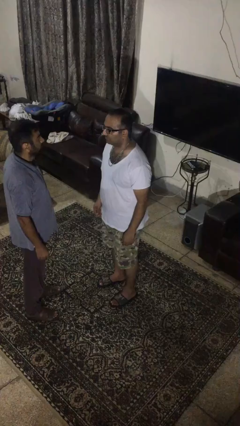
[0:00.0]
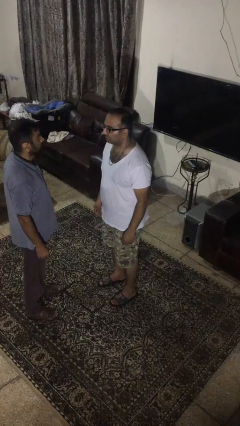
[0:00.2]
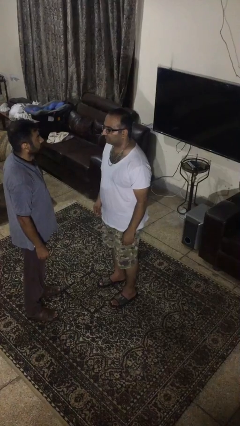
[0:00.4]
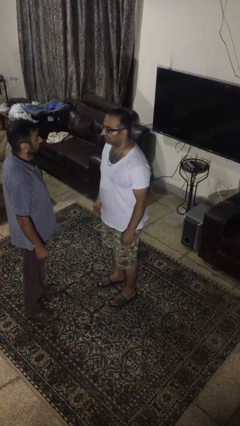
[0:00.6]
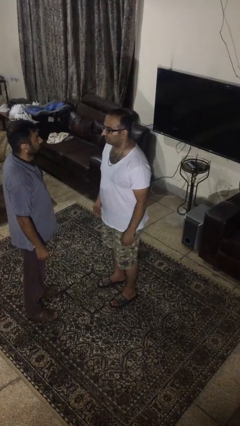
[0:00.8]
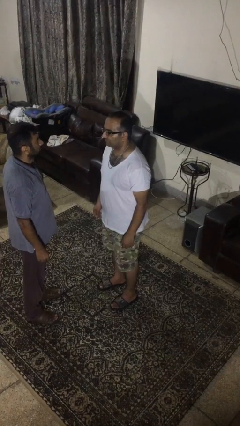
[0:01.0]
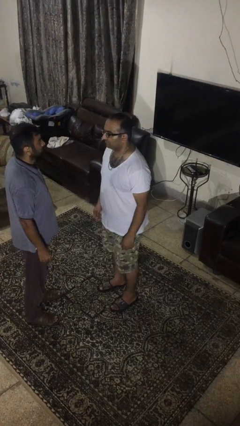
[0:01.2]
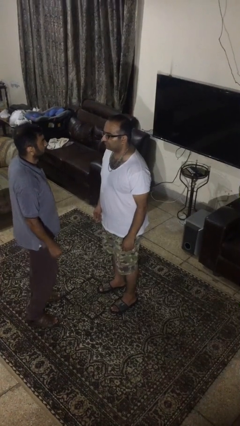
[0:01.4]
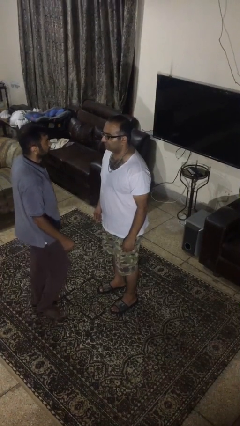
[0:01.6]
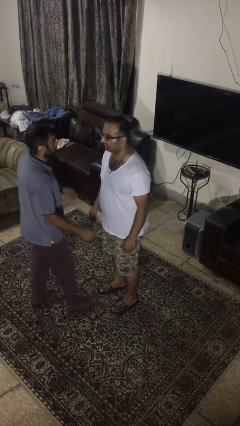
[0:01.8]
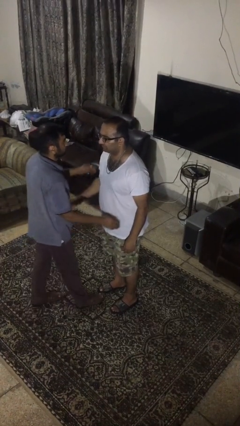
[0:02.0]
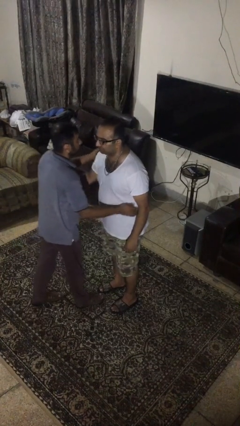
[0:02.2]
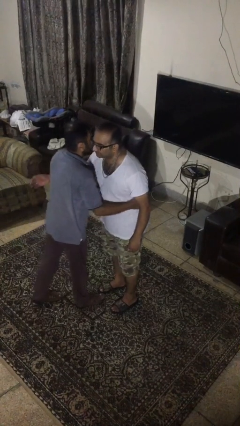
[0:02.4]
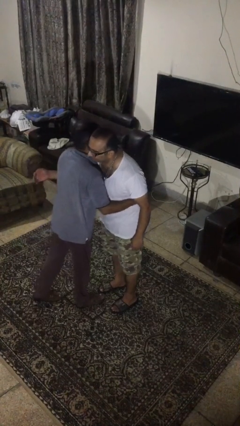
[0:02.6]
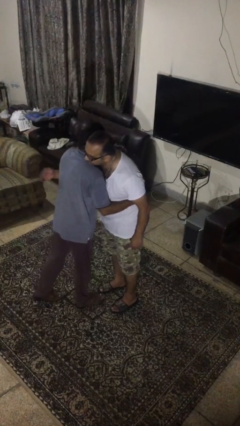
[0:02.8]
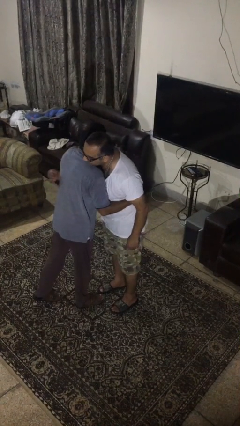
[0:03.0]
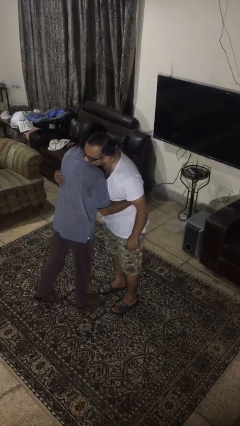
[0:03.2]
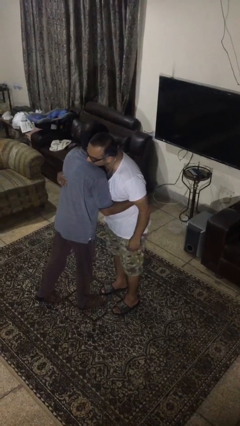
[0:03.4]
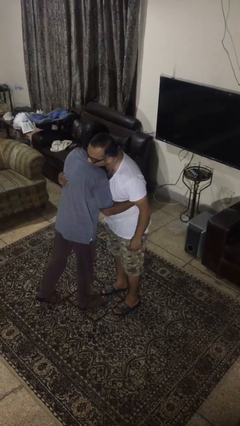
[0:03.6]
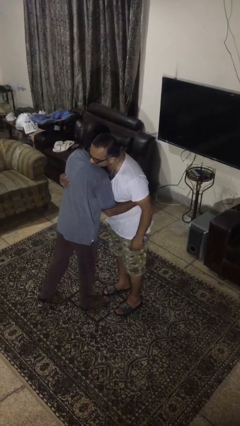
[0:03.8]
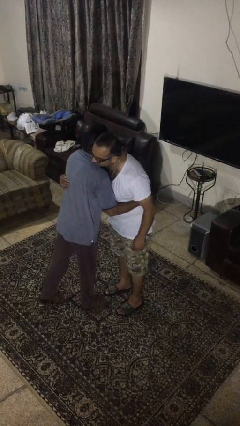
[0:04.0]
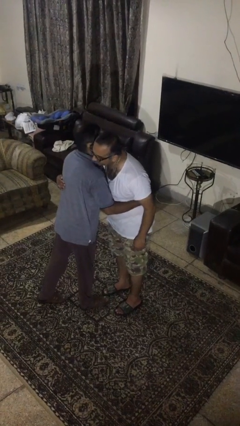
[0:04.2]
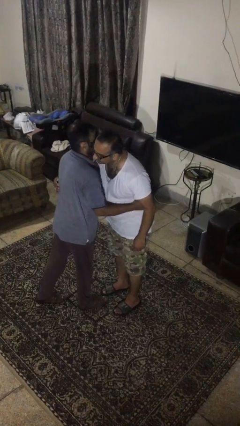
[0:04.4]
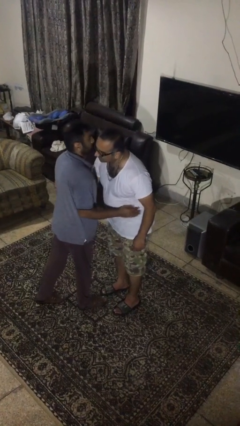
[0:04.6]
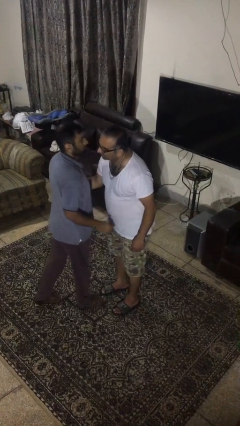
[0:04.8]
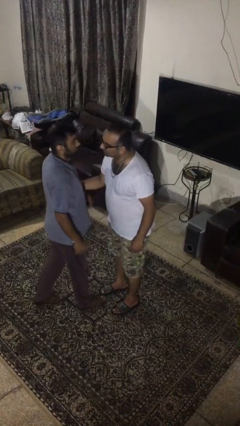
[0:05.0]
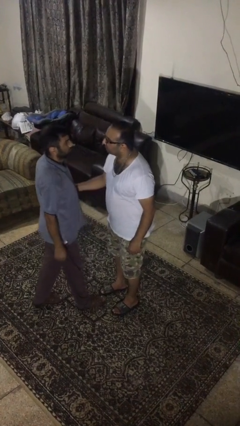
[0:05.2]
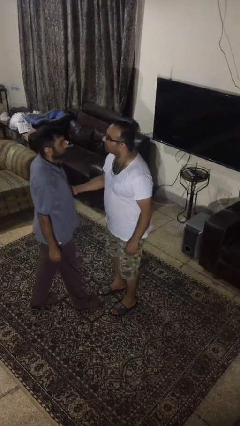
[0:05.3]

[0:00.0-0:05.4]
person embraces person

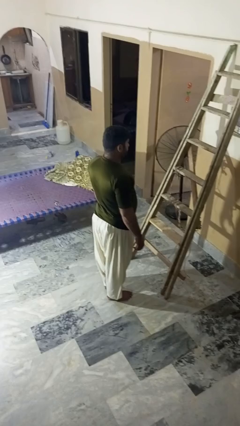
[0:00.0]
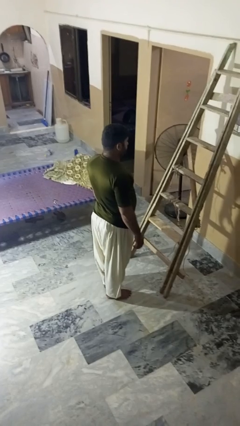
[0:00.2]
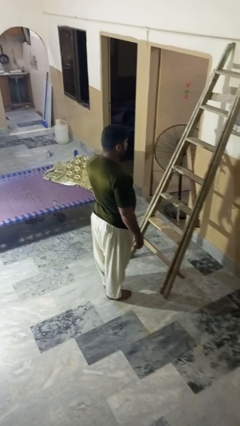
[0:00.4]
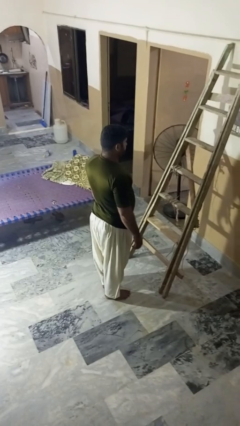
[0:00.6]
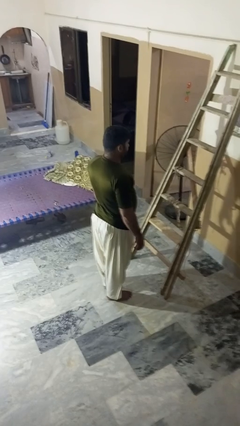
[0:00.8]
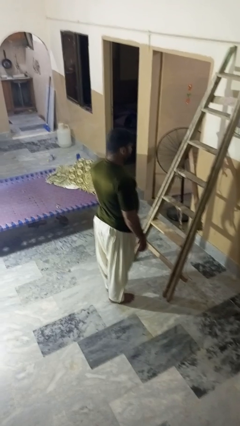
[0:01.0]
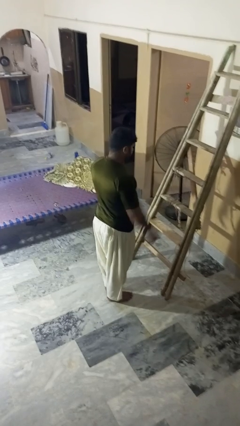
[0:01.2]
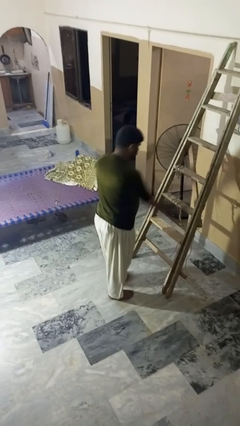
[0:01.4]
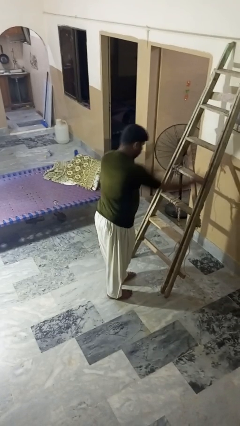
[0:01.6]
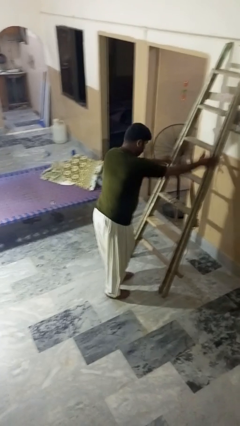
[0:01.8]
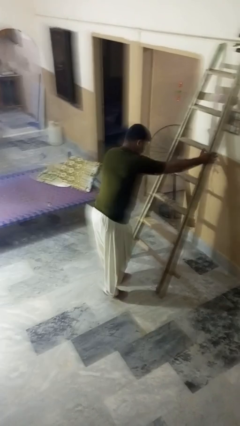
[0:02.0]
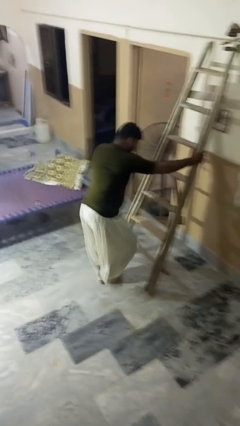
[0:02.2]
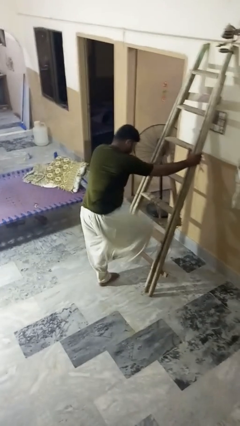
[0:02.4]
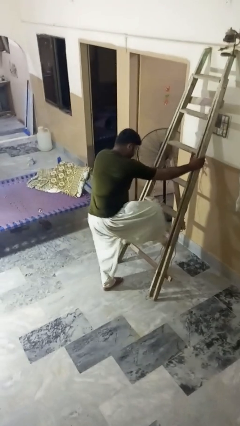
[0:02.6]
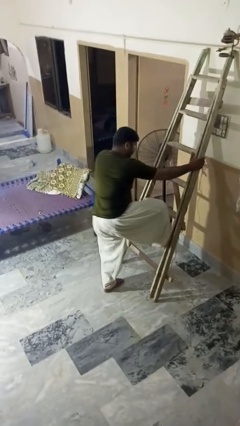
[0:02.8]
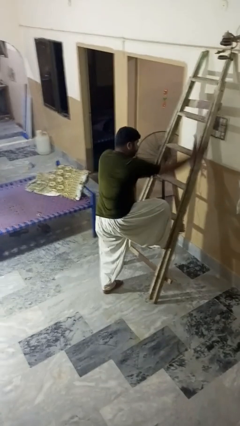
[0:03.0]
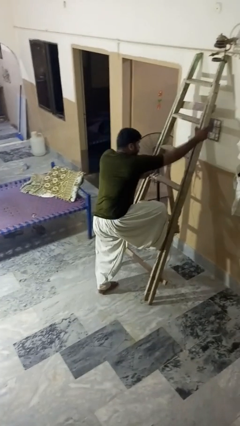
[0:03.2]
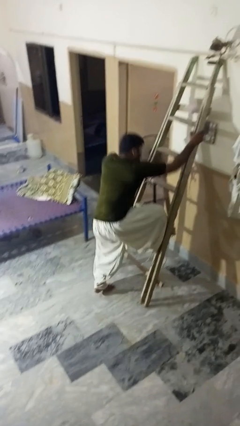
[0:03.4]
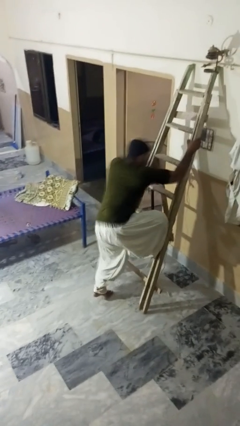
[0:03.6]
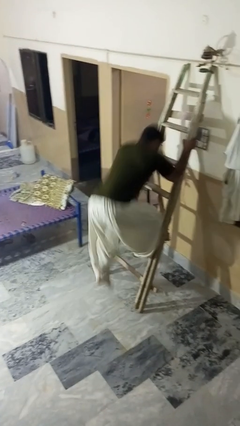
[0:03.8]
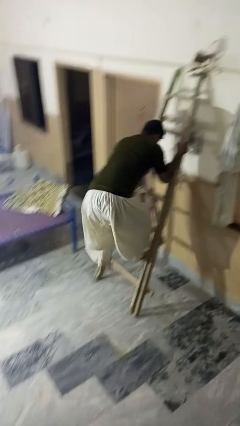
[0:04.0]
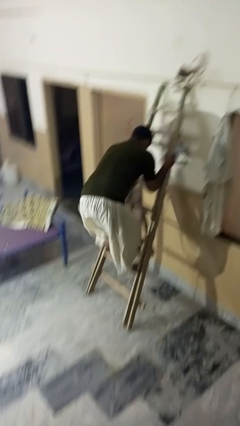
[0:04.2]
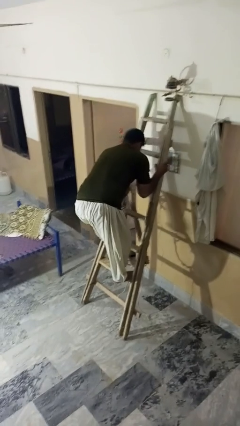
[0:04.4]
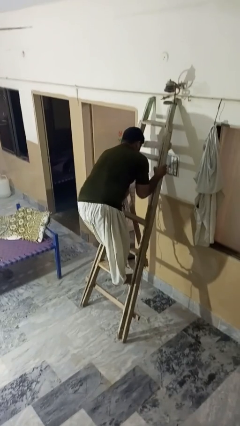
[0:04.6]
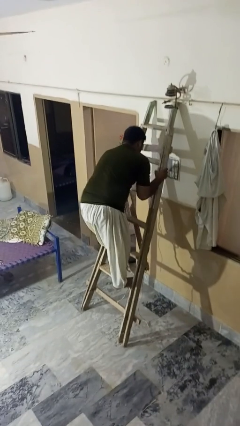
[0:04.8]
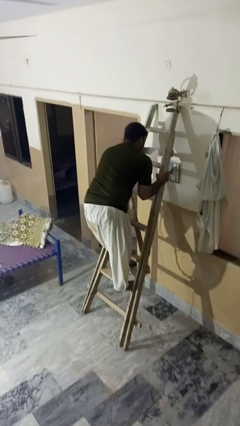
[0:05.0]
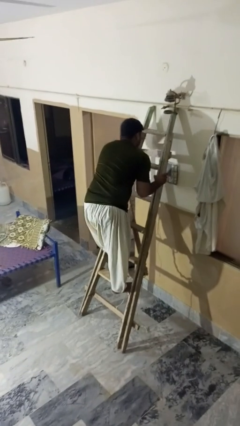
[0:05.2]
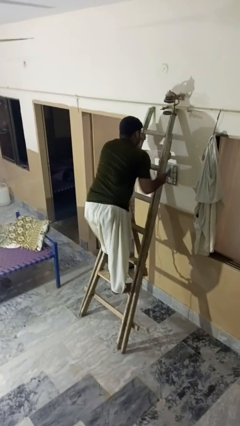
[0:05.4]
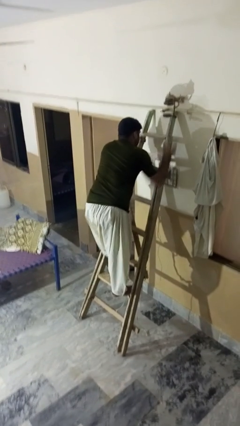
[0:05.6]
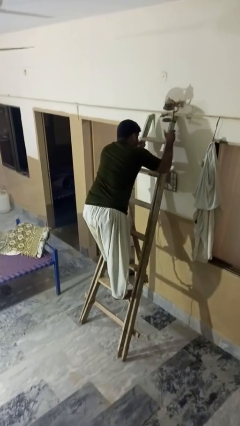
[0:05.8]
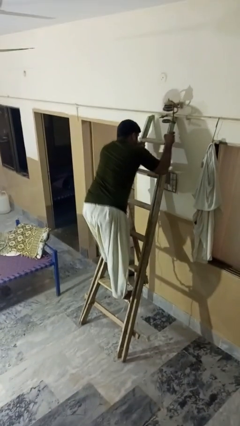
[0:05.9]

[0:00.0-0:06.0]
person climbs up ladder

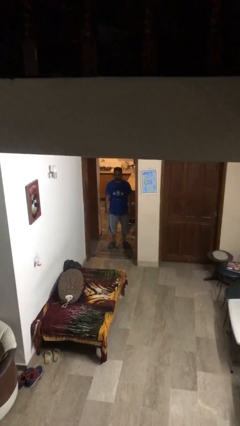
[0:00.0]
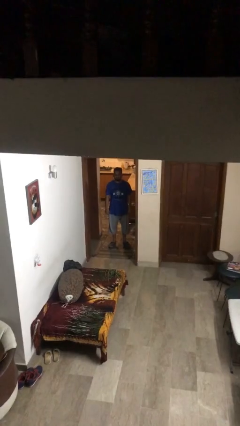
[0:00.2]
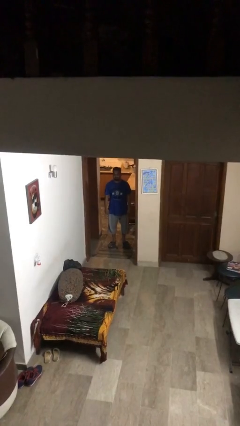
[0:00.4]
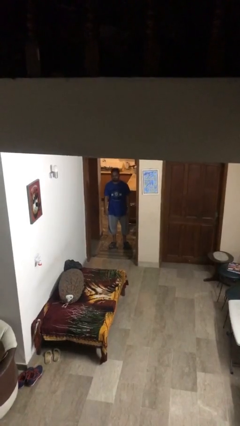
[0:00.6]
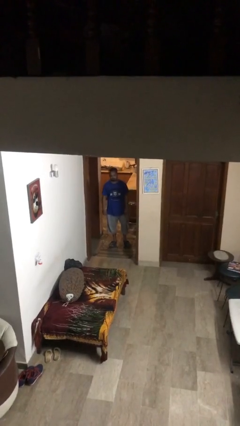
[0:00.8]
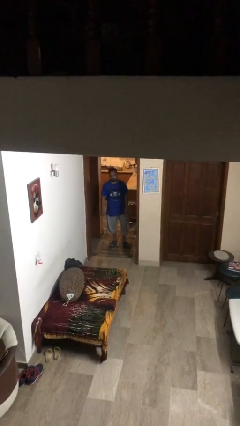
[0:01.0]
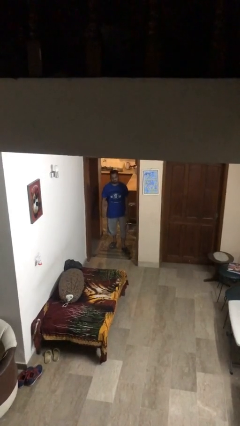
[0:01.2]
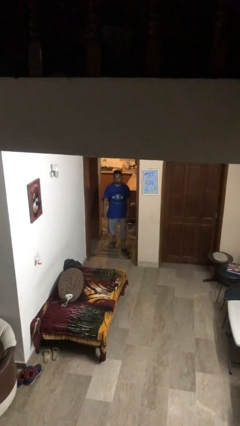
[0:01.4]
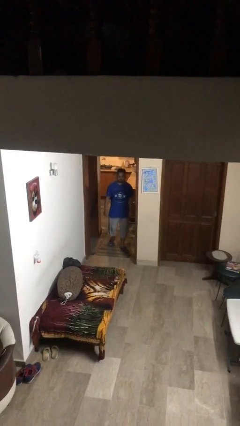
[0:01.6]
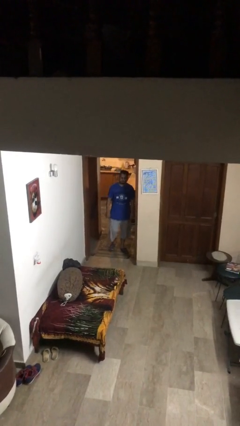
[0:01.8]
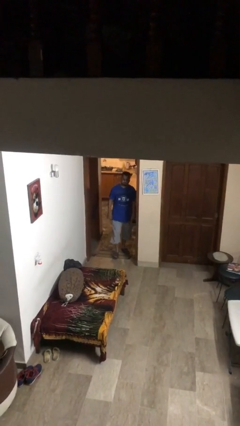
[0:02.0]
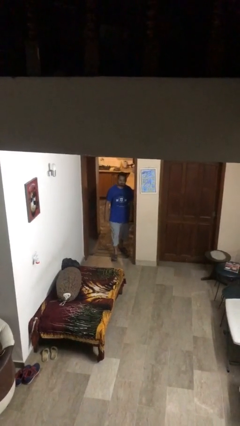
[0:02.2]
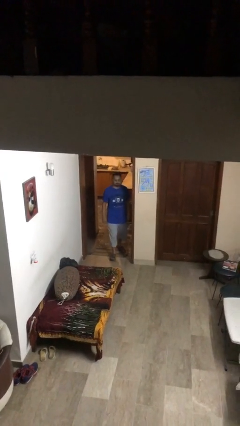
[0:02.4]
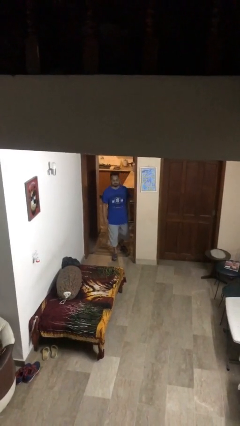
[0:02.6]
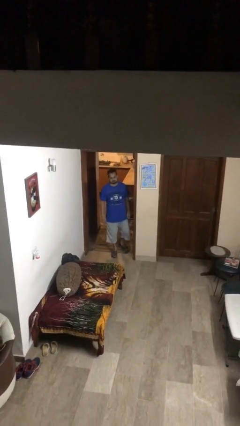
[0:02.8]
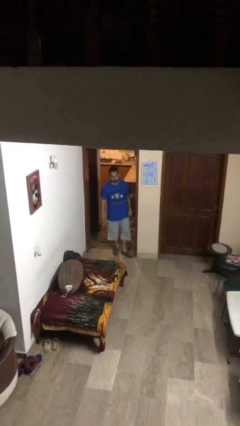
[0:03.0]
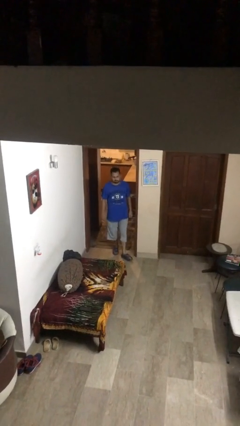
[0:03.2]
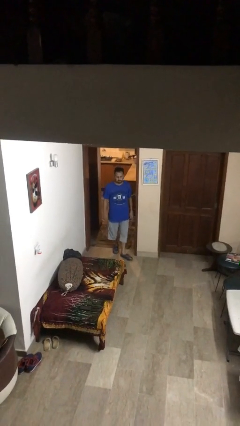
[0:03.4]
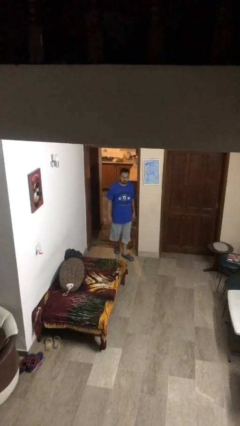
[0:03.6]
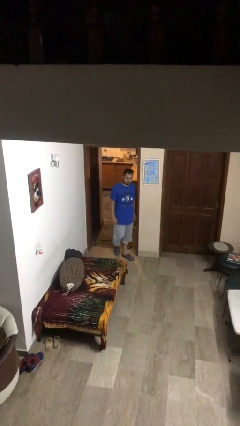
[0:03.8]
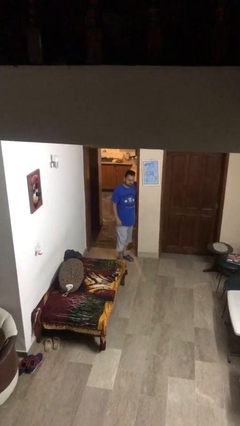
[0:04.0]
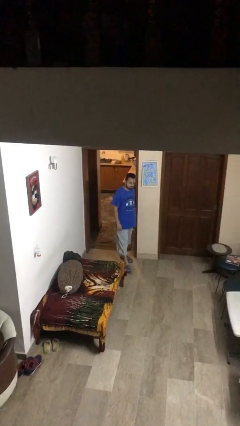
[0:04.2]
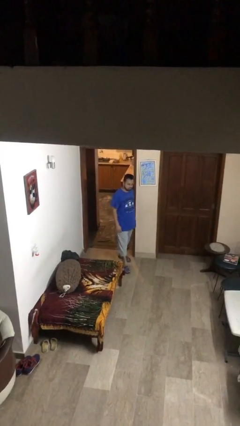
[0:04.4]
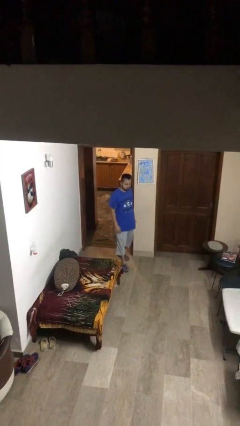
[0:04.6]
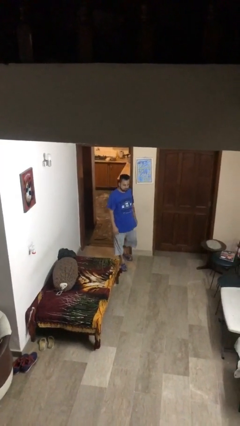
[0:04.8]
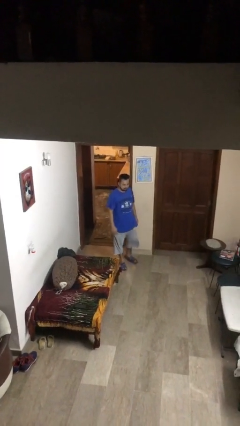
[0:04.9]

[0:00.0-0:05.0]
person enters scene through structure

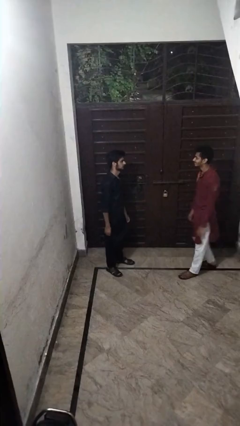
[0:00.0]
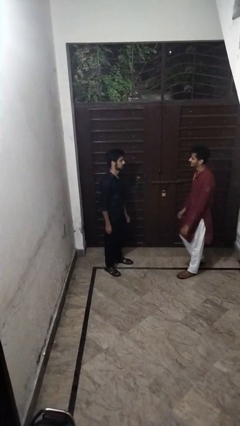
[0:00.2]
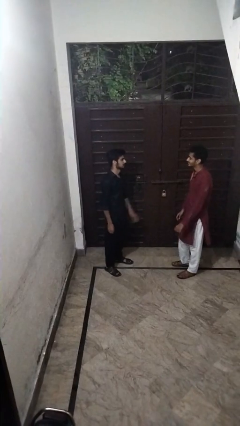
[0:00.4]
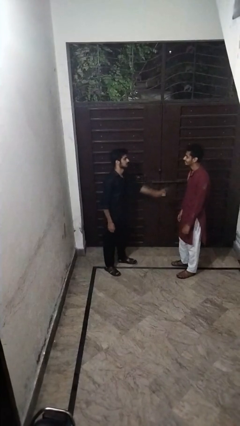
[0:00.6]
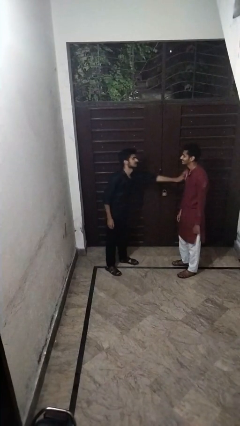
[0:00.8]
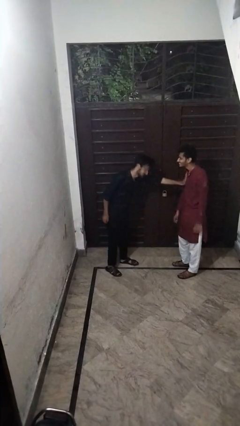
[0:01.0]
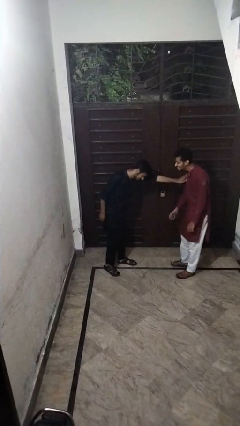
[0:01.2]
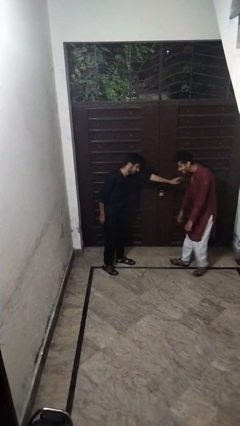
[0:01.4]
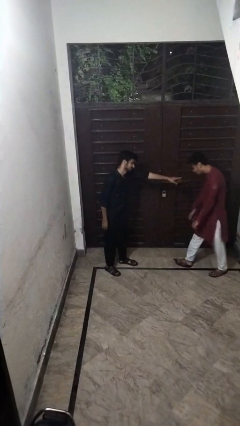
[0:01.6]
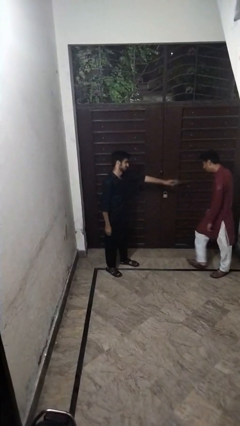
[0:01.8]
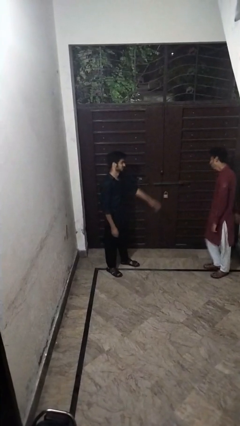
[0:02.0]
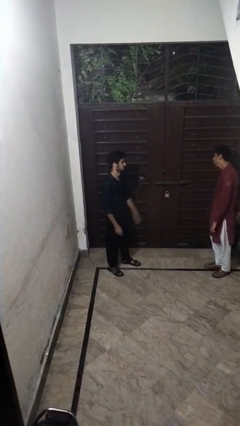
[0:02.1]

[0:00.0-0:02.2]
person shoves person
